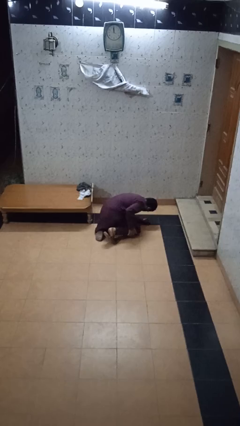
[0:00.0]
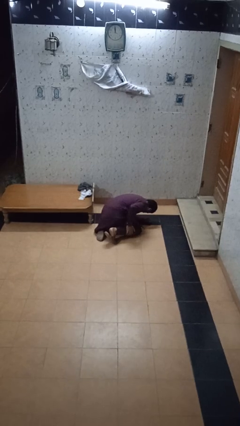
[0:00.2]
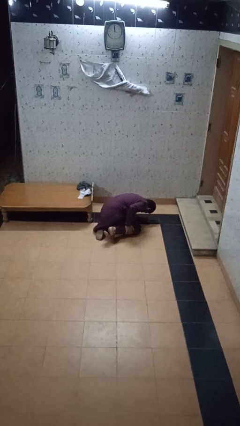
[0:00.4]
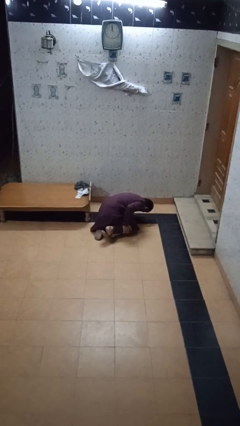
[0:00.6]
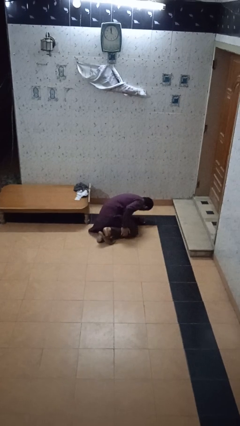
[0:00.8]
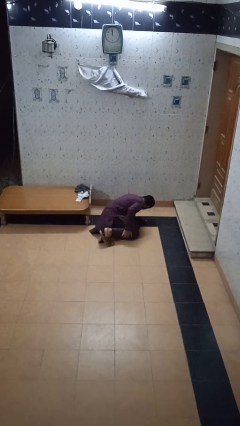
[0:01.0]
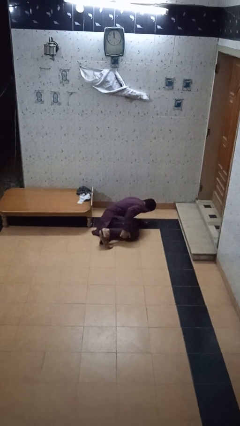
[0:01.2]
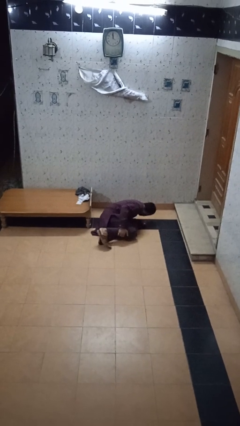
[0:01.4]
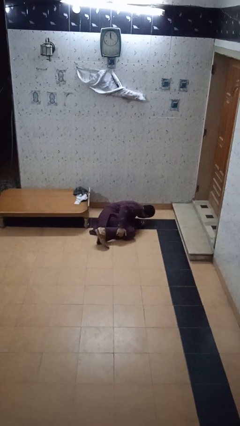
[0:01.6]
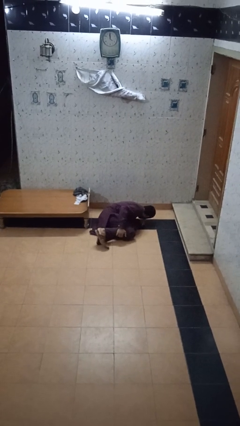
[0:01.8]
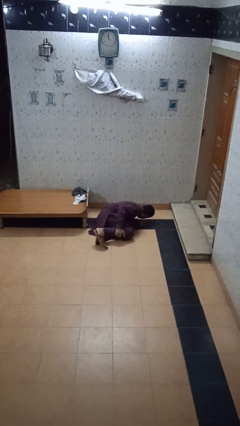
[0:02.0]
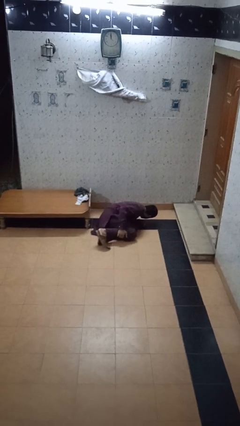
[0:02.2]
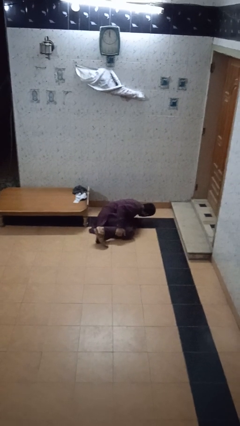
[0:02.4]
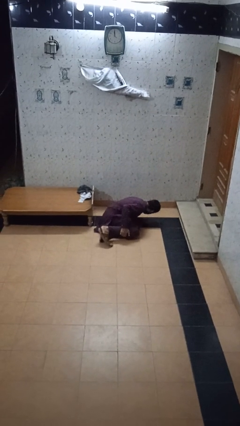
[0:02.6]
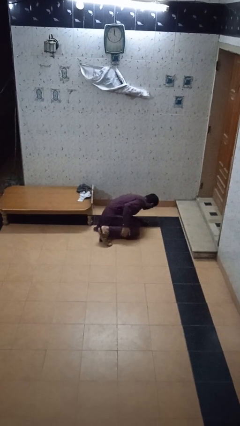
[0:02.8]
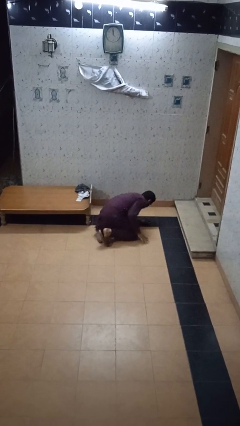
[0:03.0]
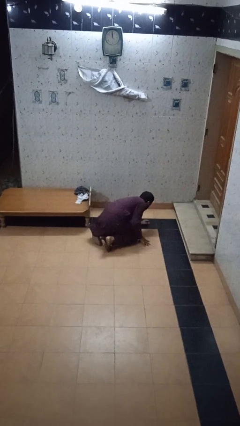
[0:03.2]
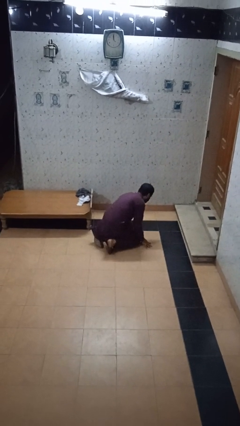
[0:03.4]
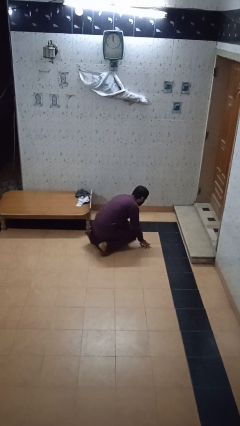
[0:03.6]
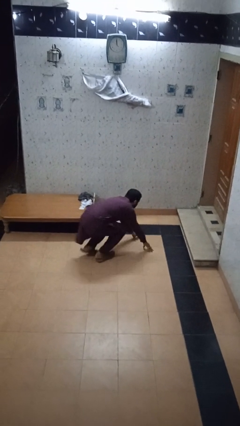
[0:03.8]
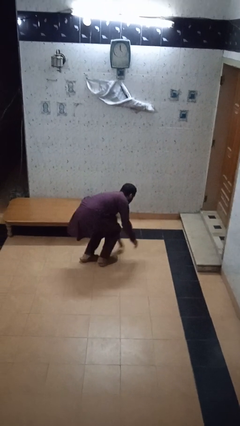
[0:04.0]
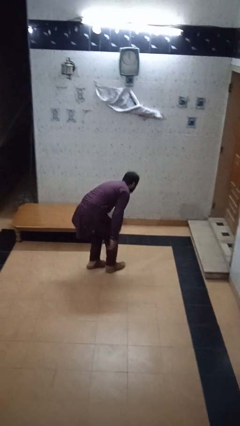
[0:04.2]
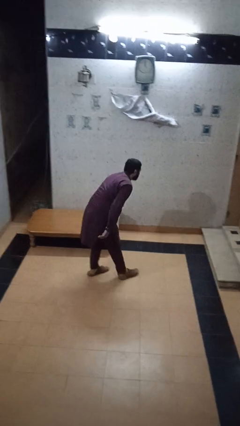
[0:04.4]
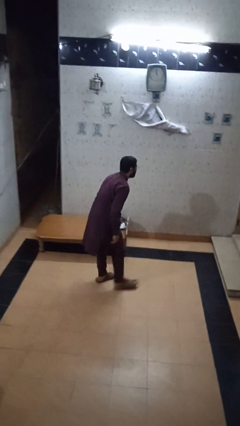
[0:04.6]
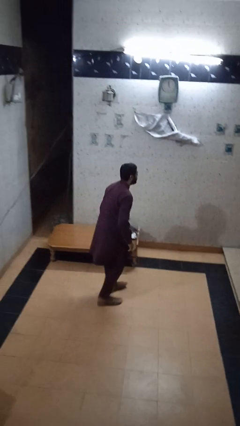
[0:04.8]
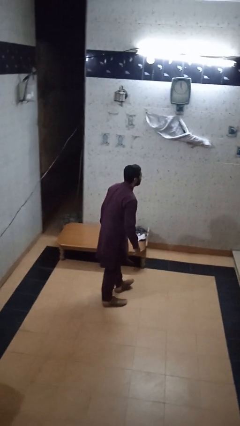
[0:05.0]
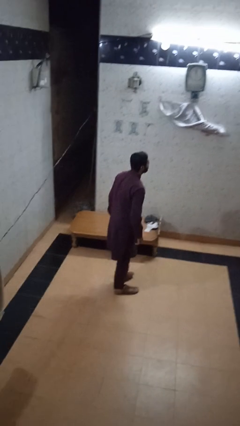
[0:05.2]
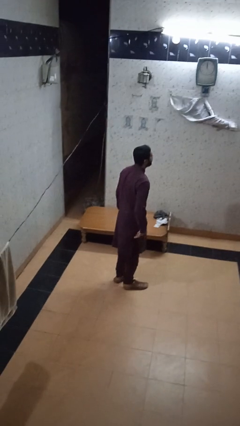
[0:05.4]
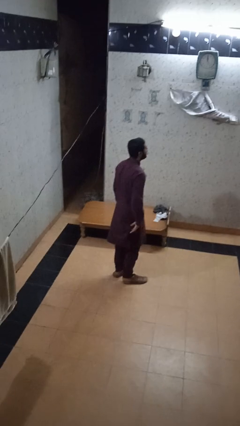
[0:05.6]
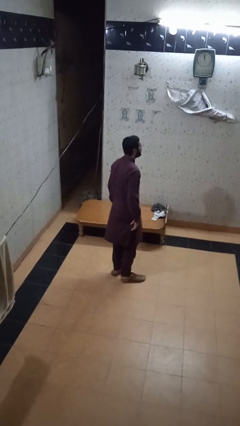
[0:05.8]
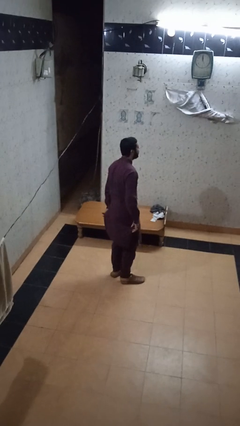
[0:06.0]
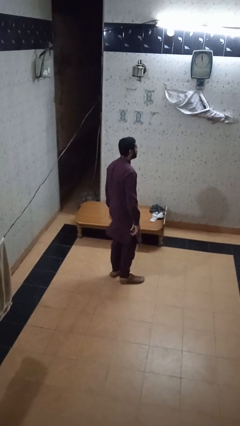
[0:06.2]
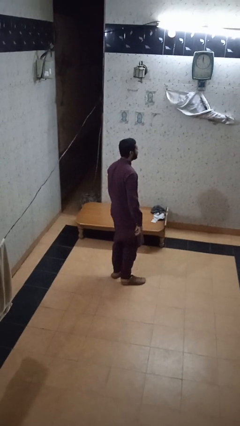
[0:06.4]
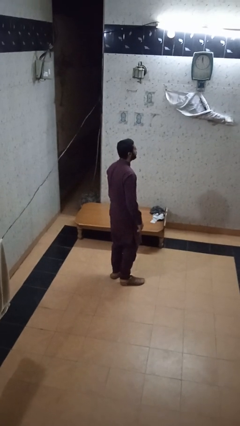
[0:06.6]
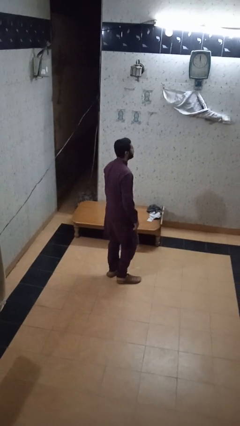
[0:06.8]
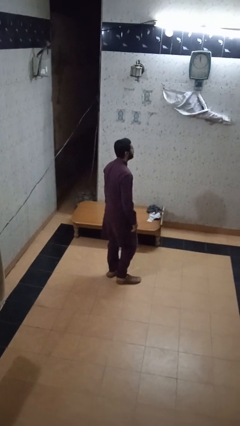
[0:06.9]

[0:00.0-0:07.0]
person stands up from floor

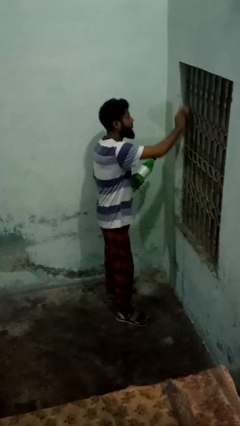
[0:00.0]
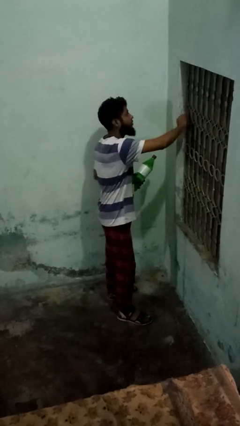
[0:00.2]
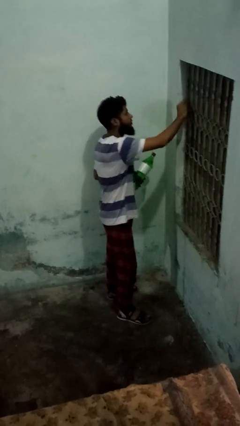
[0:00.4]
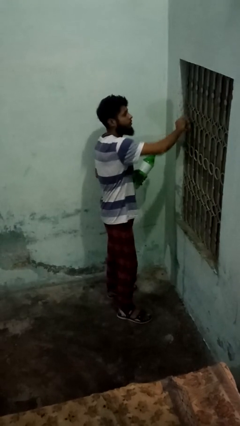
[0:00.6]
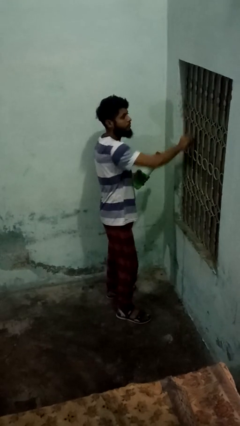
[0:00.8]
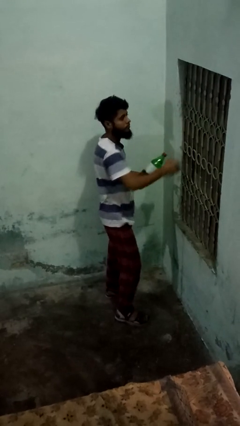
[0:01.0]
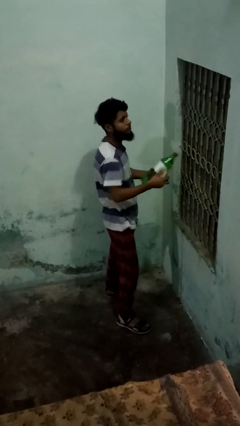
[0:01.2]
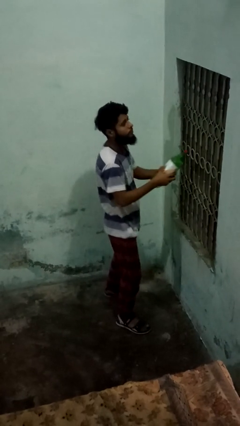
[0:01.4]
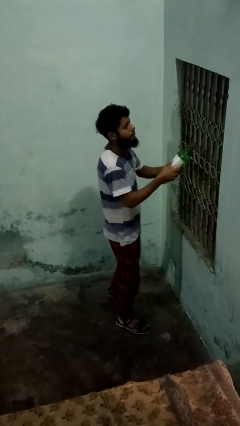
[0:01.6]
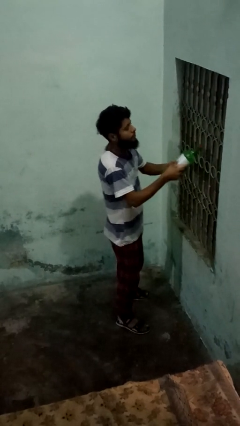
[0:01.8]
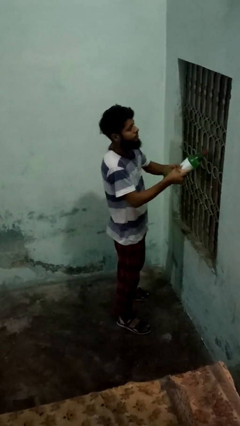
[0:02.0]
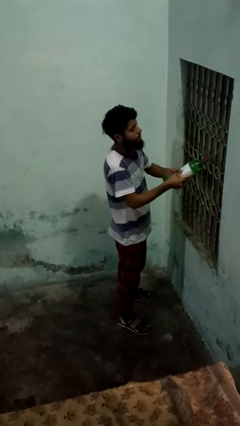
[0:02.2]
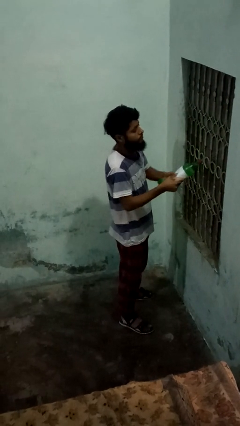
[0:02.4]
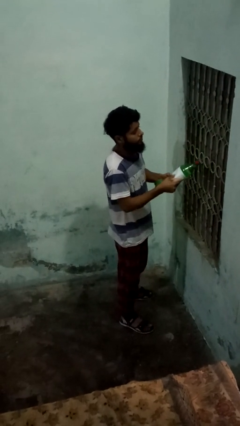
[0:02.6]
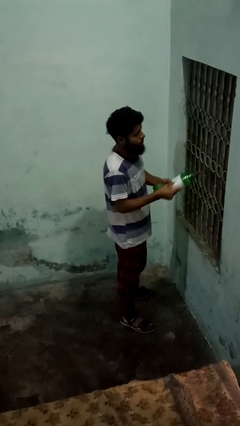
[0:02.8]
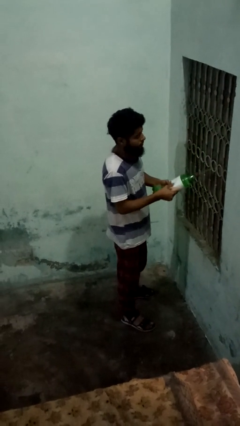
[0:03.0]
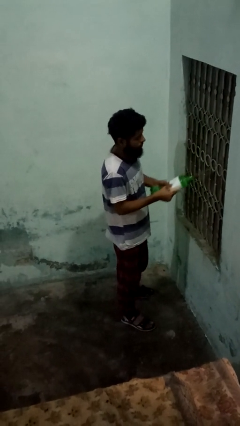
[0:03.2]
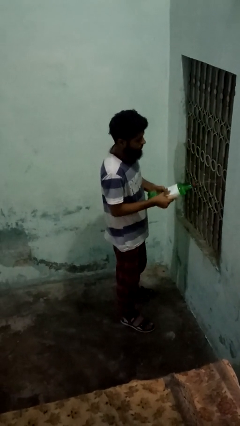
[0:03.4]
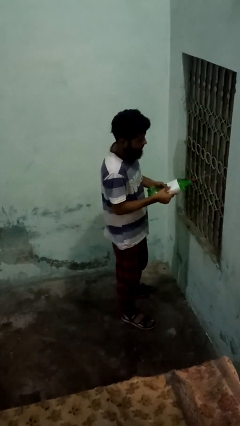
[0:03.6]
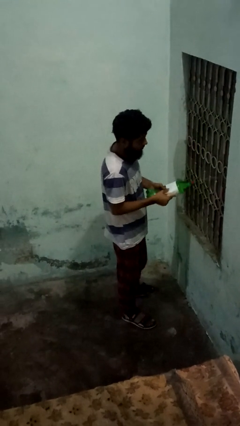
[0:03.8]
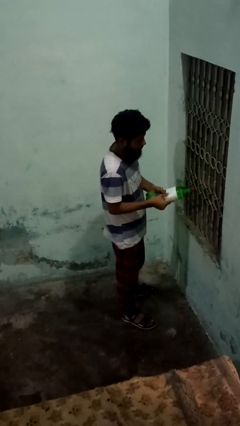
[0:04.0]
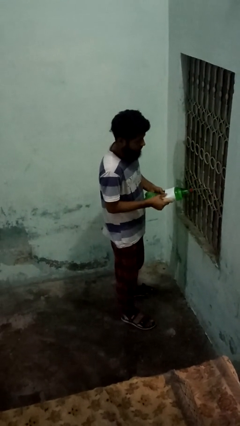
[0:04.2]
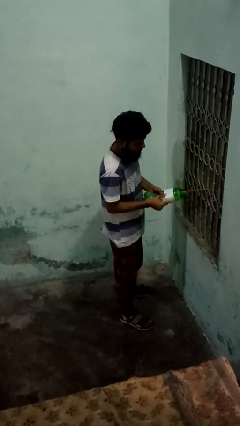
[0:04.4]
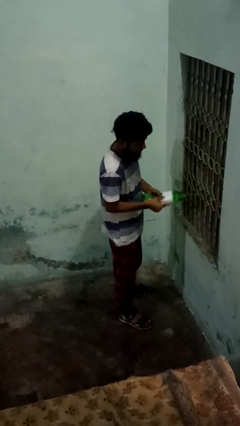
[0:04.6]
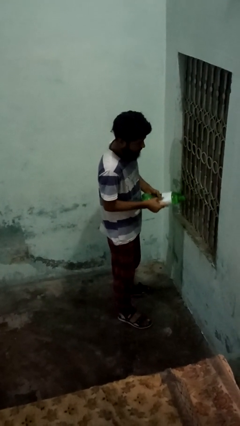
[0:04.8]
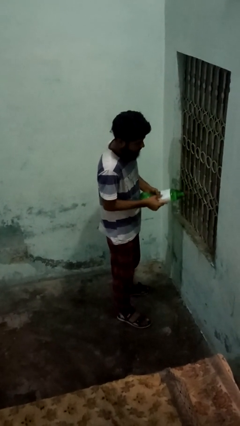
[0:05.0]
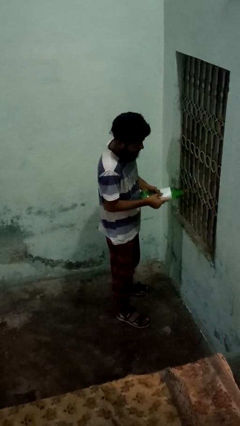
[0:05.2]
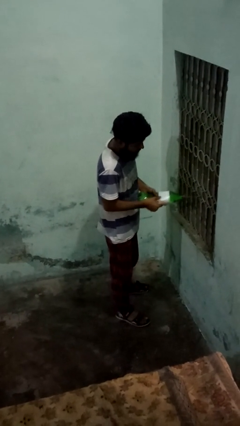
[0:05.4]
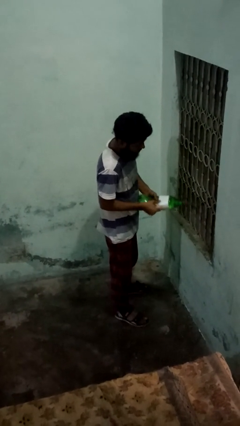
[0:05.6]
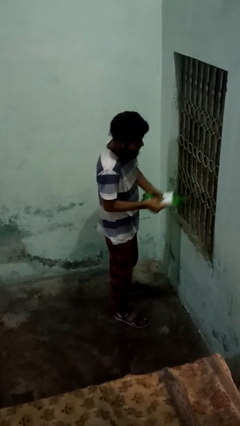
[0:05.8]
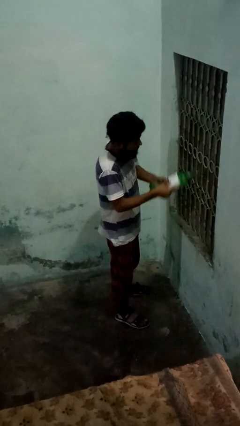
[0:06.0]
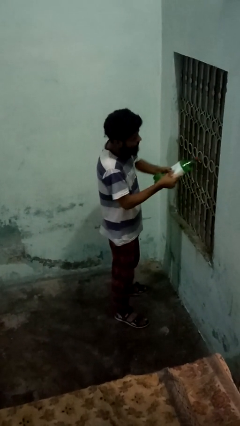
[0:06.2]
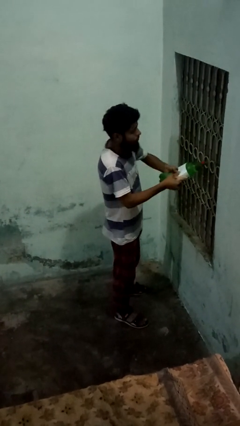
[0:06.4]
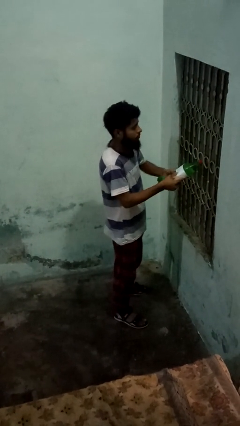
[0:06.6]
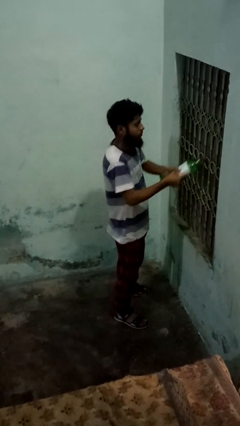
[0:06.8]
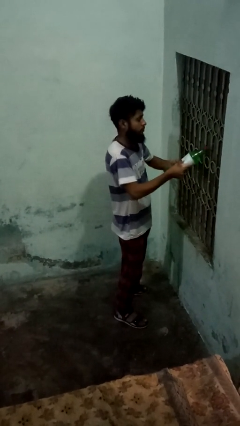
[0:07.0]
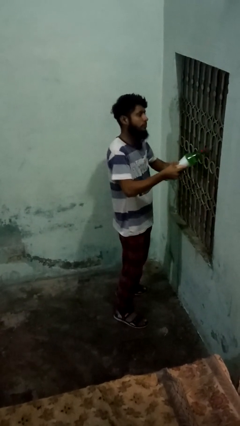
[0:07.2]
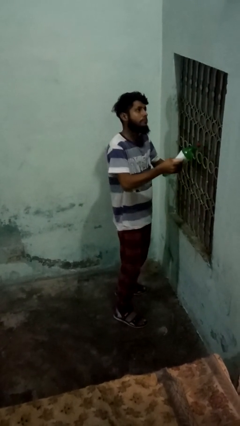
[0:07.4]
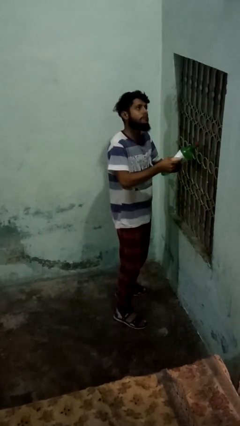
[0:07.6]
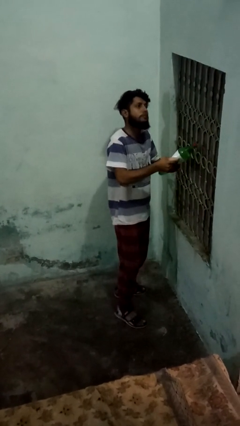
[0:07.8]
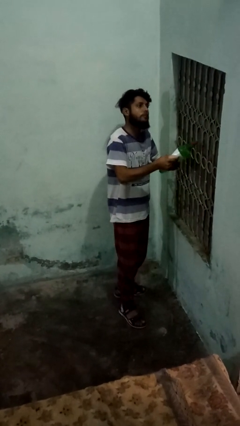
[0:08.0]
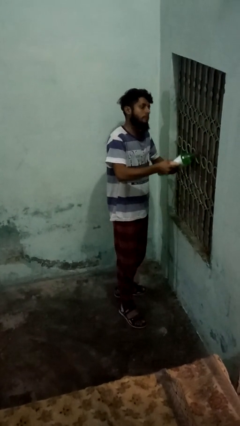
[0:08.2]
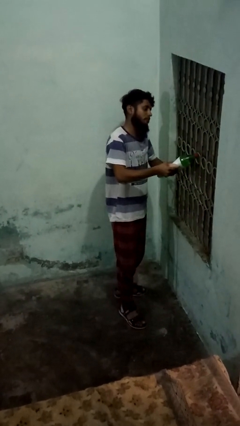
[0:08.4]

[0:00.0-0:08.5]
person sprays from bottle

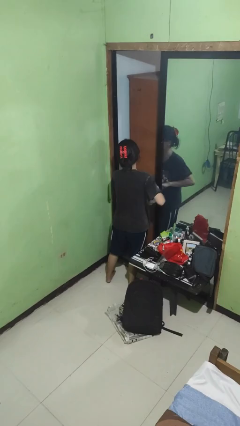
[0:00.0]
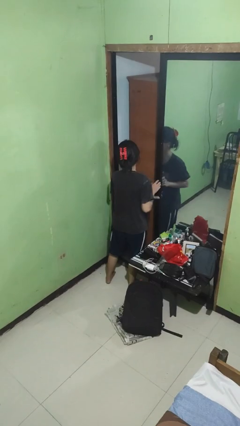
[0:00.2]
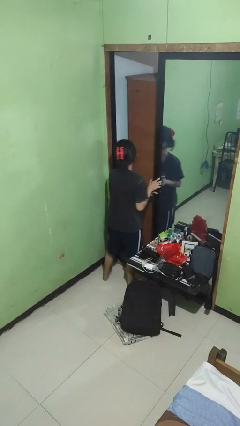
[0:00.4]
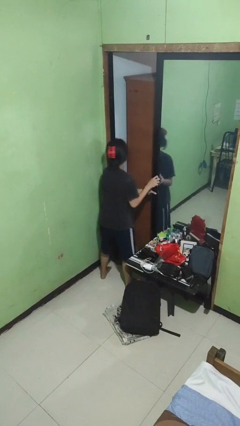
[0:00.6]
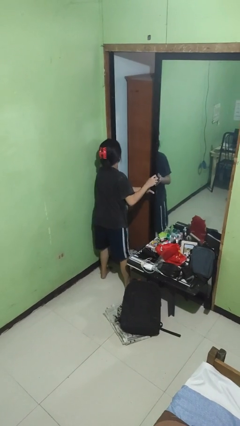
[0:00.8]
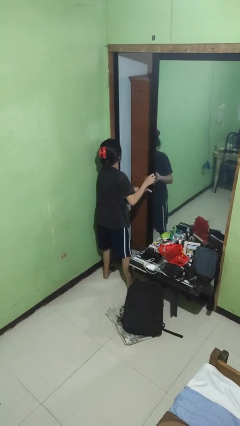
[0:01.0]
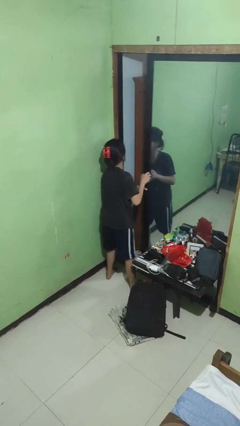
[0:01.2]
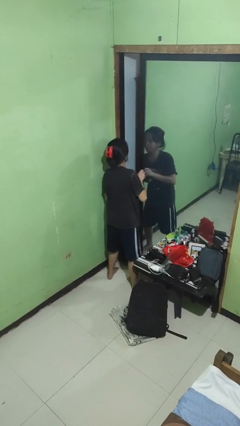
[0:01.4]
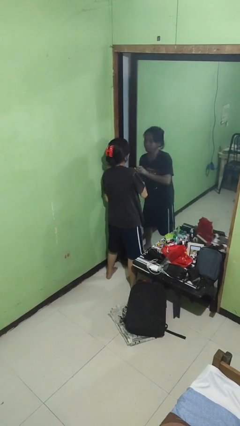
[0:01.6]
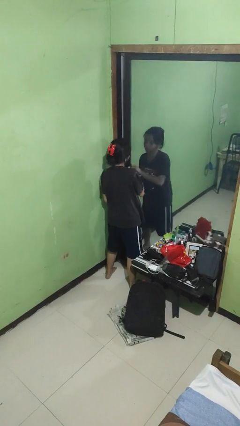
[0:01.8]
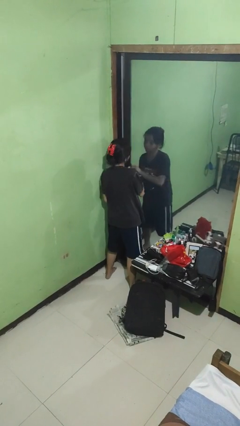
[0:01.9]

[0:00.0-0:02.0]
person closes sliding door

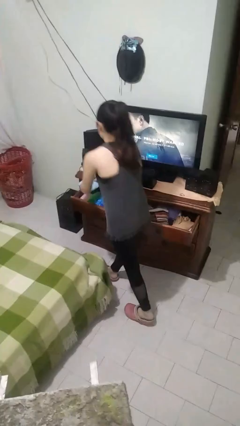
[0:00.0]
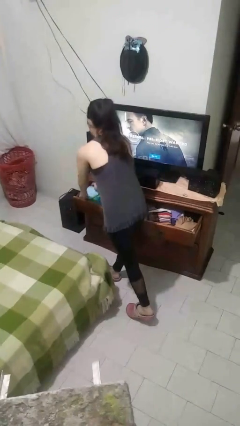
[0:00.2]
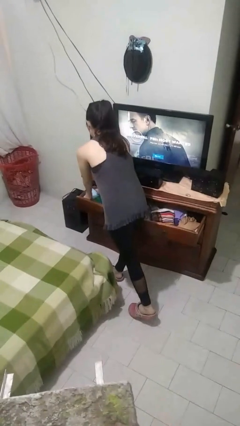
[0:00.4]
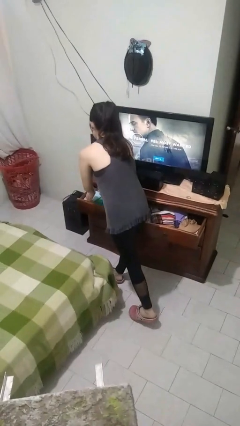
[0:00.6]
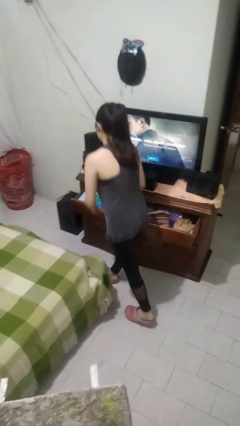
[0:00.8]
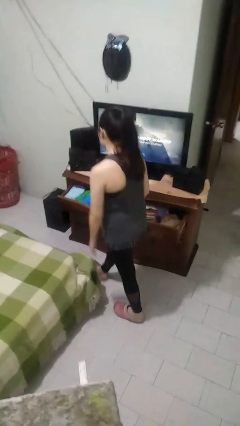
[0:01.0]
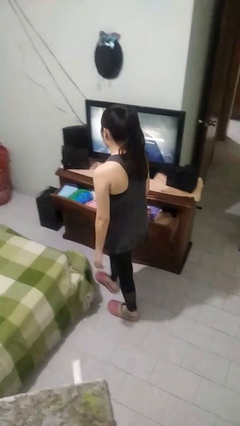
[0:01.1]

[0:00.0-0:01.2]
person puts clothes into dresser
